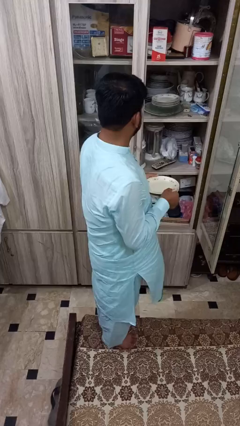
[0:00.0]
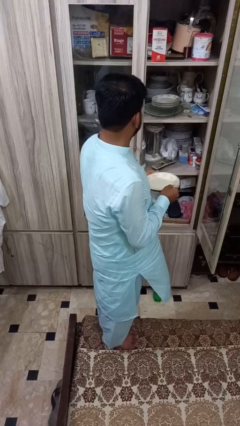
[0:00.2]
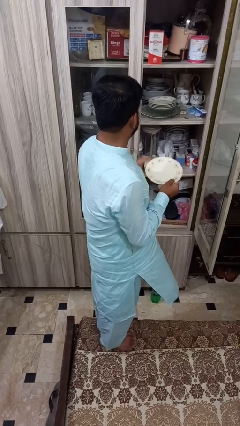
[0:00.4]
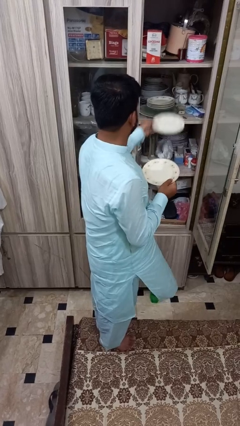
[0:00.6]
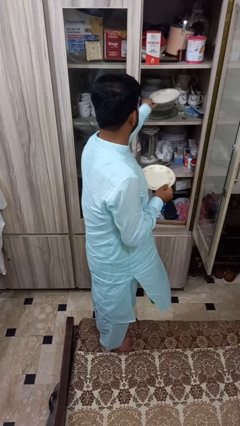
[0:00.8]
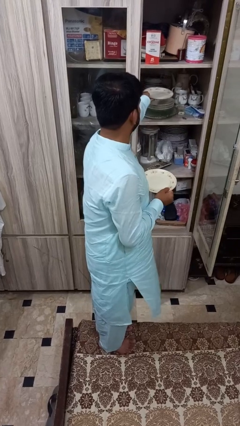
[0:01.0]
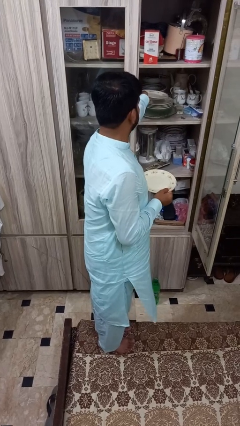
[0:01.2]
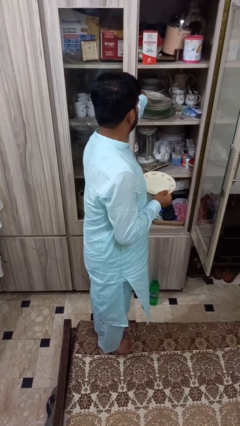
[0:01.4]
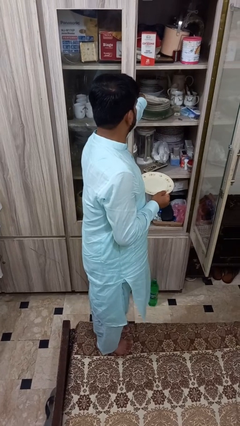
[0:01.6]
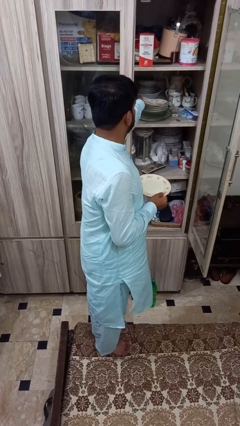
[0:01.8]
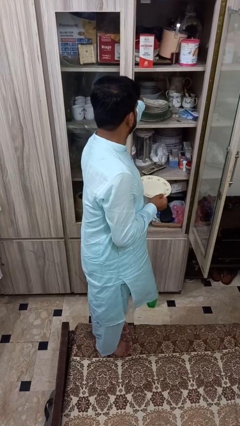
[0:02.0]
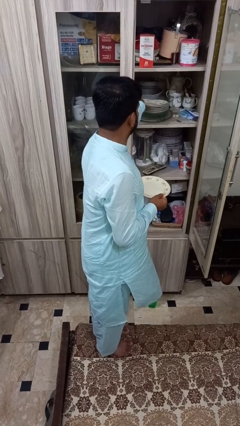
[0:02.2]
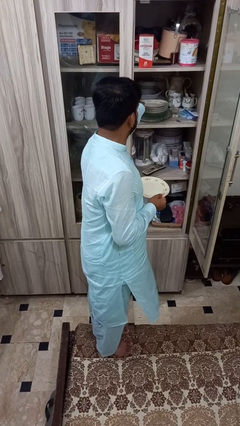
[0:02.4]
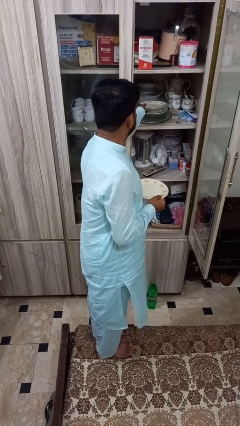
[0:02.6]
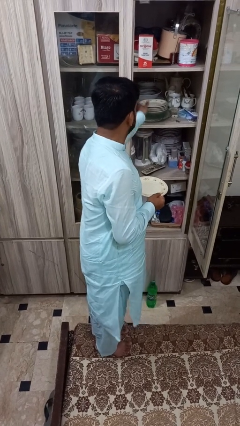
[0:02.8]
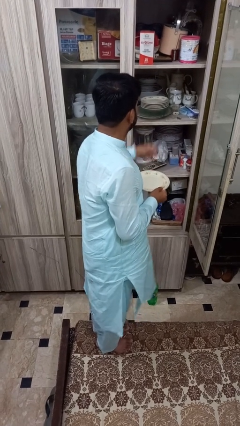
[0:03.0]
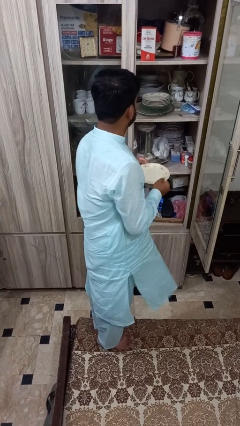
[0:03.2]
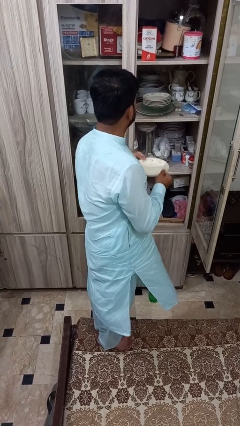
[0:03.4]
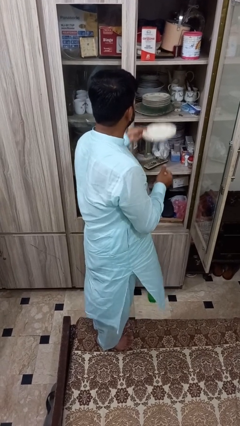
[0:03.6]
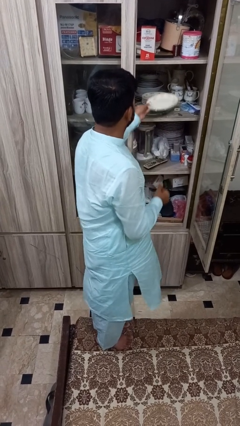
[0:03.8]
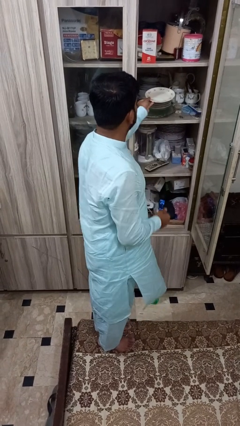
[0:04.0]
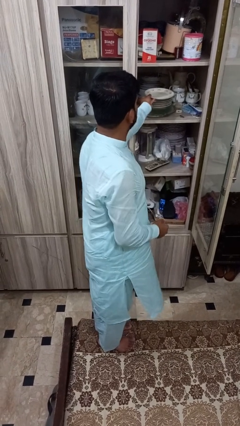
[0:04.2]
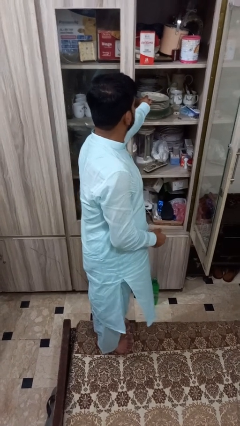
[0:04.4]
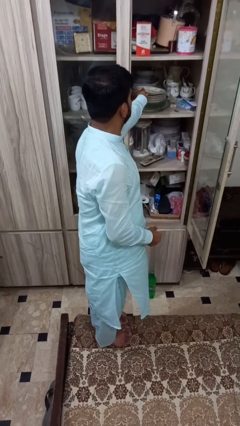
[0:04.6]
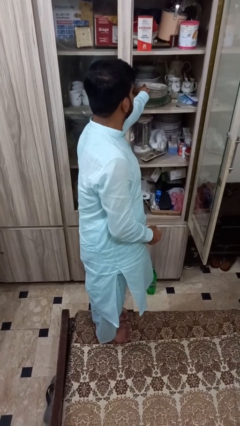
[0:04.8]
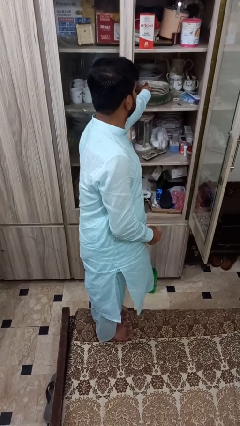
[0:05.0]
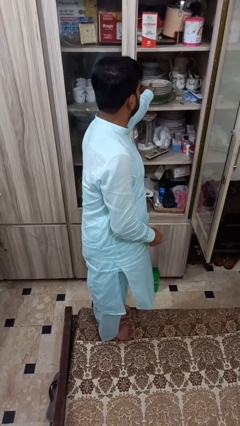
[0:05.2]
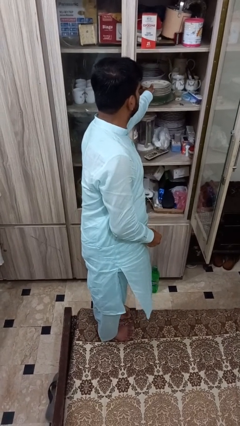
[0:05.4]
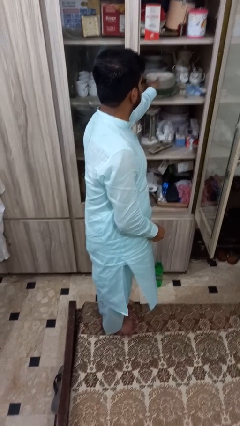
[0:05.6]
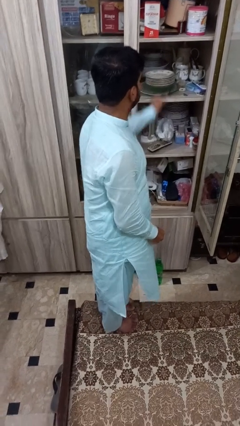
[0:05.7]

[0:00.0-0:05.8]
person loads groceries into cabinet

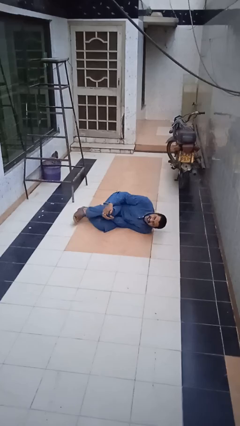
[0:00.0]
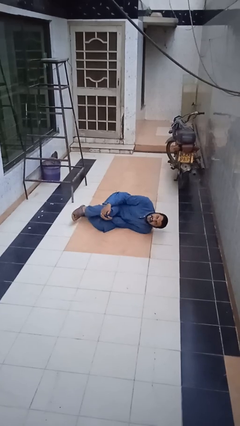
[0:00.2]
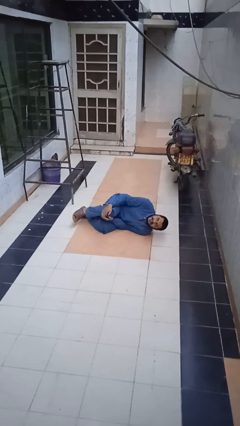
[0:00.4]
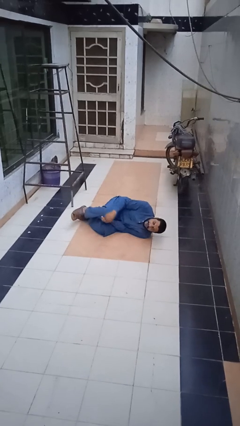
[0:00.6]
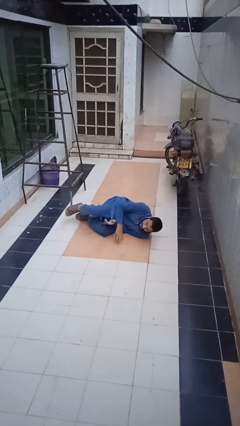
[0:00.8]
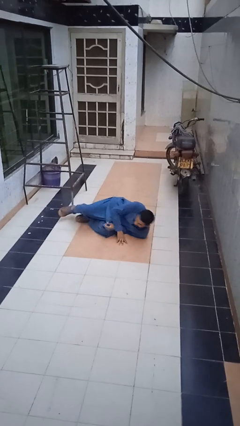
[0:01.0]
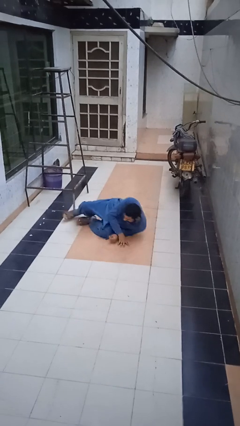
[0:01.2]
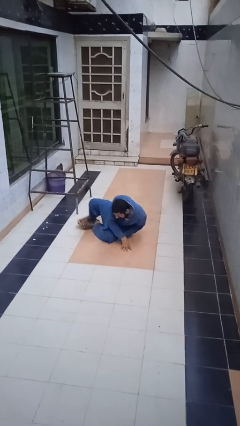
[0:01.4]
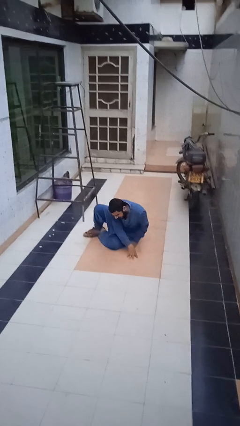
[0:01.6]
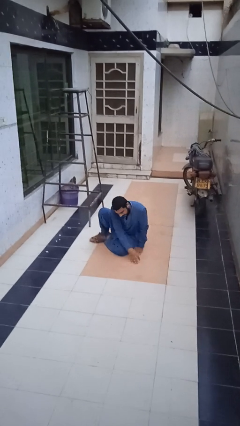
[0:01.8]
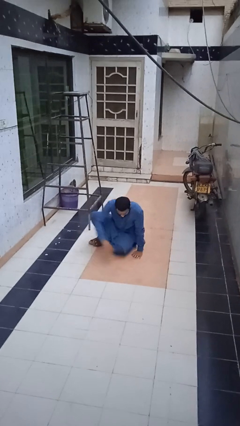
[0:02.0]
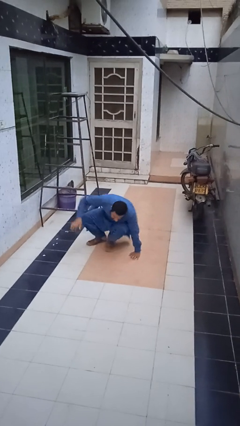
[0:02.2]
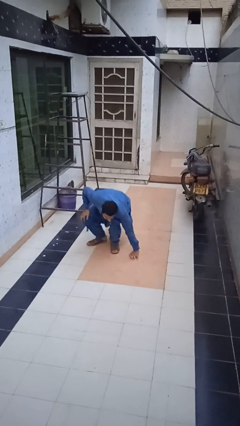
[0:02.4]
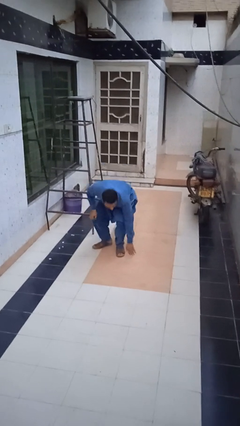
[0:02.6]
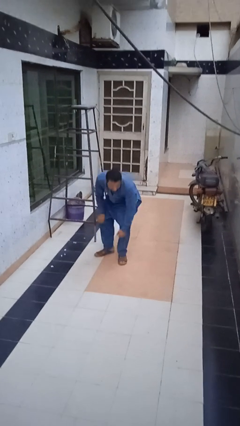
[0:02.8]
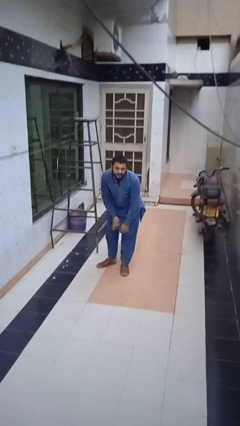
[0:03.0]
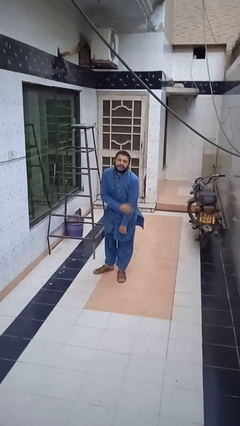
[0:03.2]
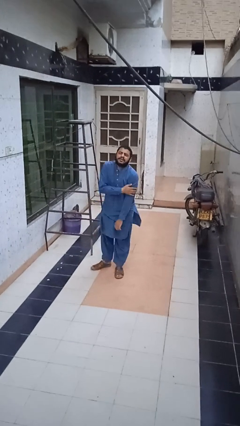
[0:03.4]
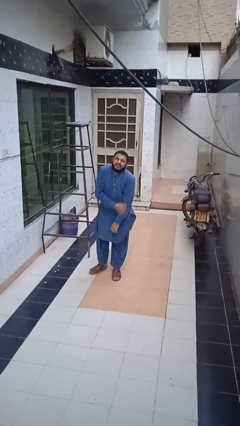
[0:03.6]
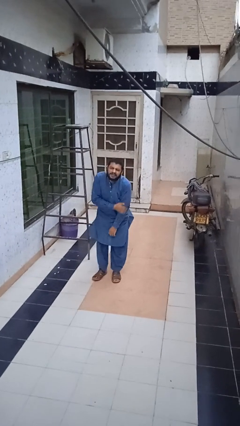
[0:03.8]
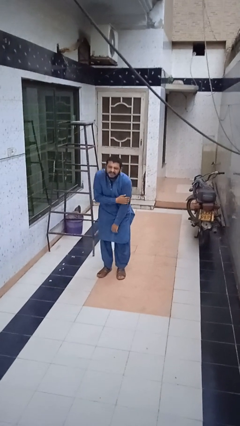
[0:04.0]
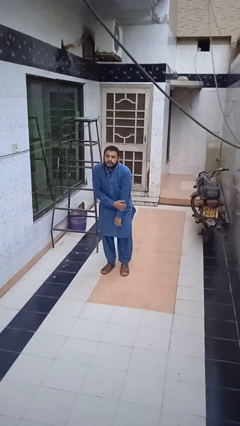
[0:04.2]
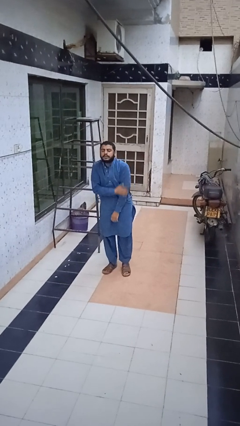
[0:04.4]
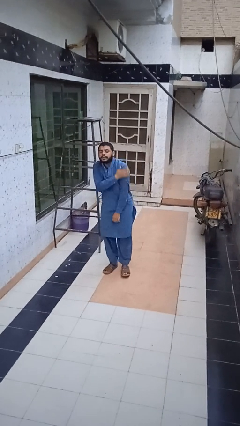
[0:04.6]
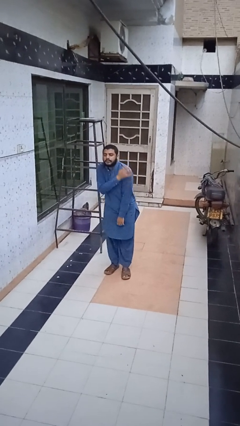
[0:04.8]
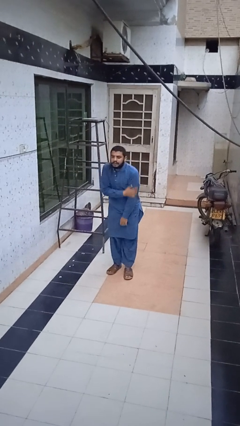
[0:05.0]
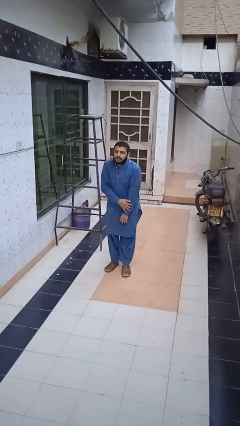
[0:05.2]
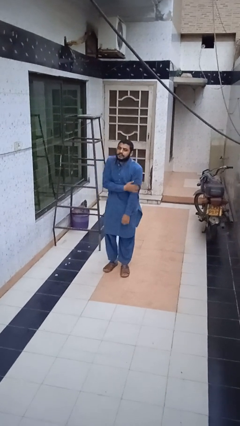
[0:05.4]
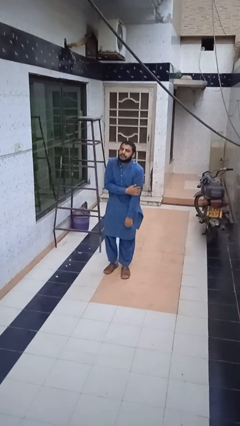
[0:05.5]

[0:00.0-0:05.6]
person stands up from floor

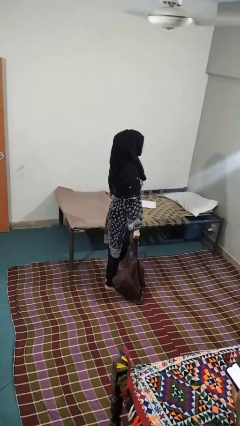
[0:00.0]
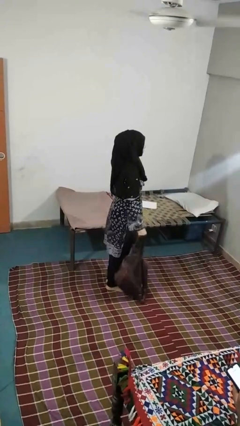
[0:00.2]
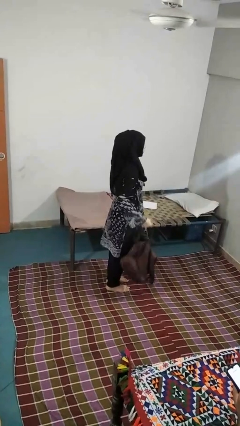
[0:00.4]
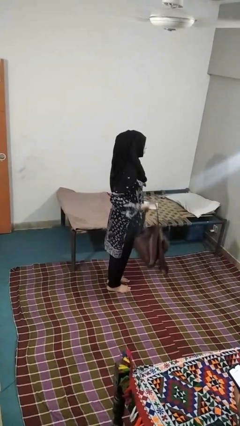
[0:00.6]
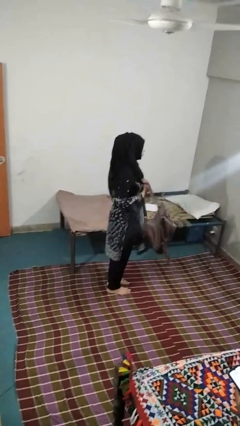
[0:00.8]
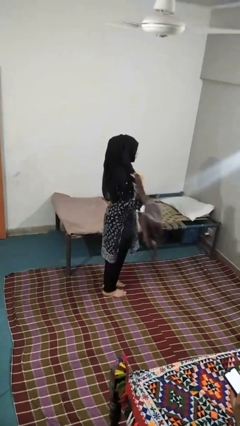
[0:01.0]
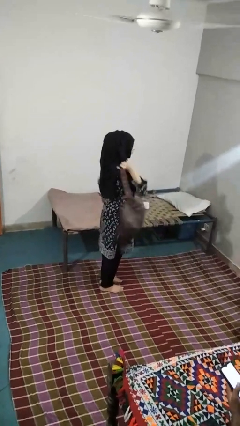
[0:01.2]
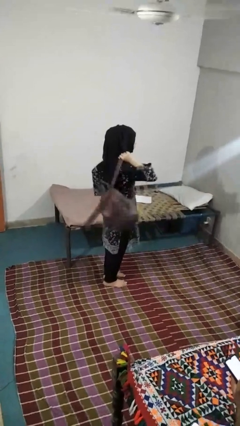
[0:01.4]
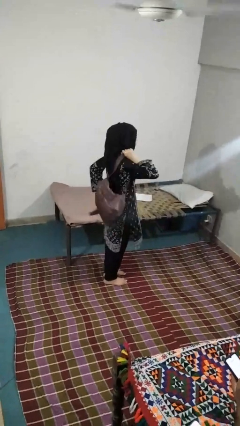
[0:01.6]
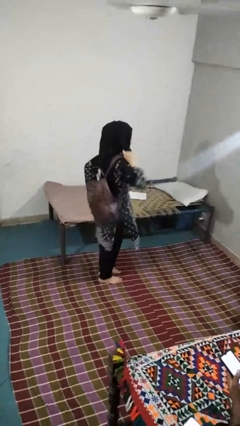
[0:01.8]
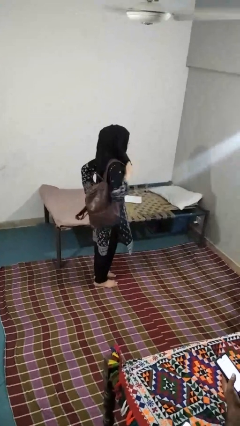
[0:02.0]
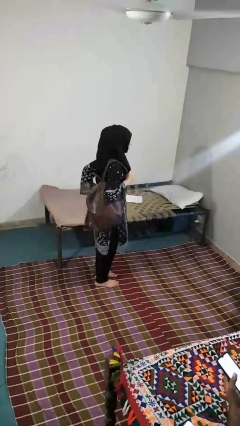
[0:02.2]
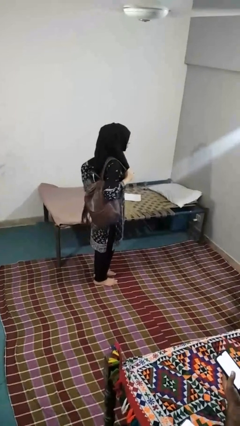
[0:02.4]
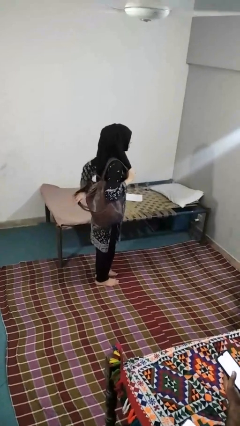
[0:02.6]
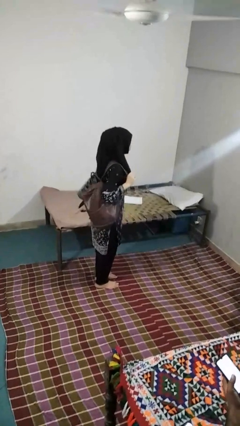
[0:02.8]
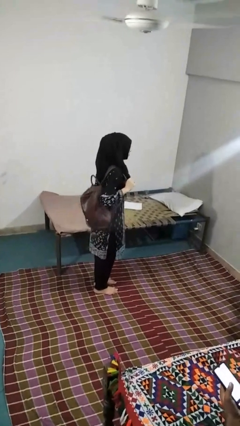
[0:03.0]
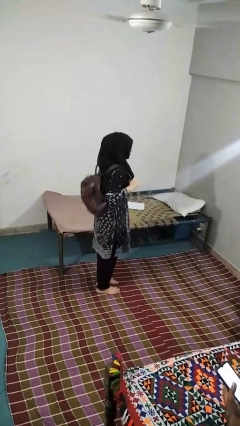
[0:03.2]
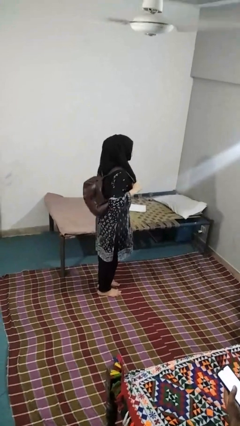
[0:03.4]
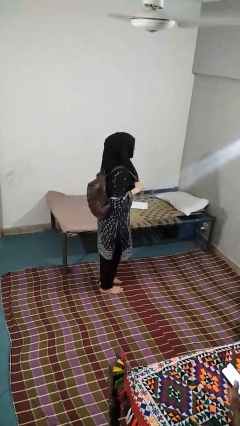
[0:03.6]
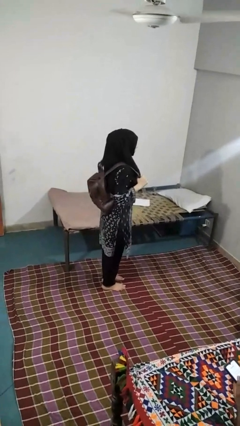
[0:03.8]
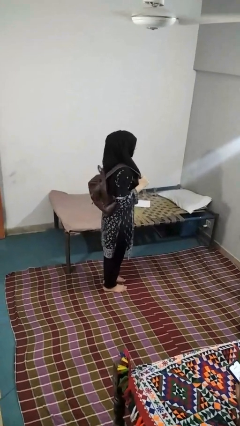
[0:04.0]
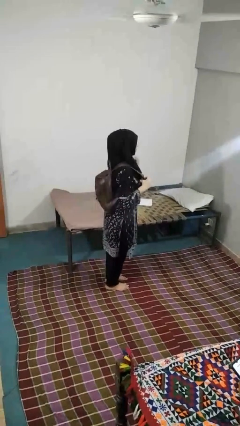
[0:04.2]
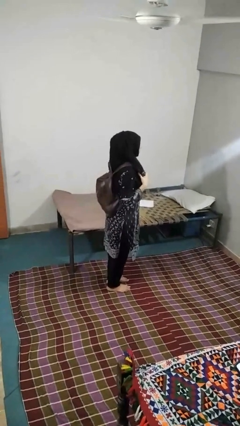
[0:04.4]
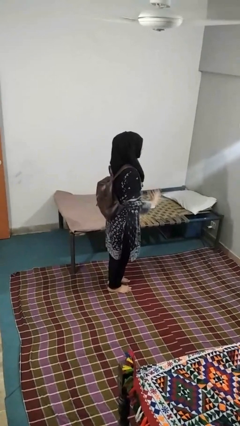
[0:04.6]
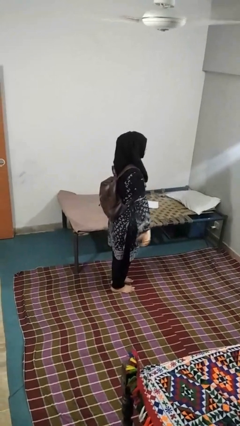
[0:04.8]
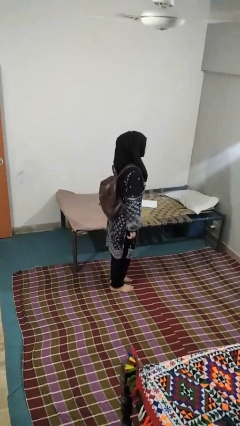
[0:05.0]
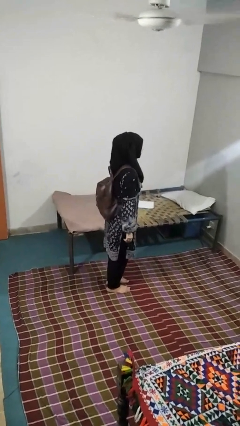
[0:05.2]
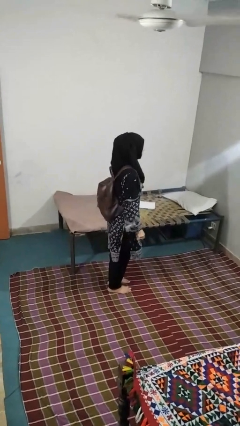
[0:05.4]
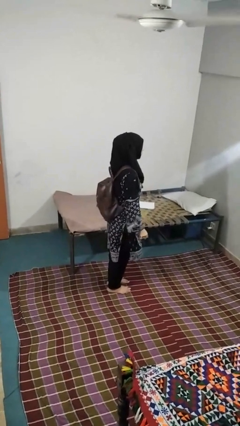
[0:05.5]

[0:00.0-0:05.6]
person puts on backpack

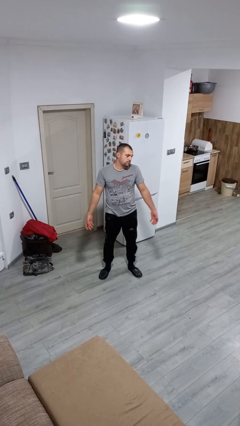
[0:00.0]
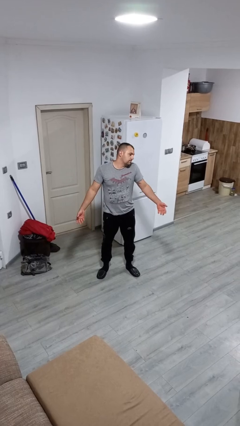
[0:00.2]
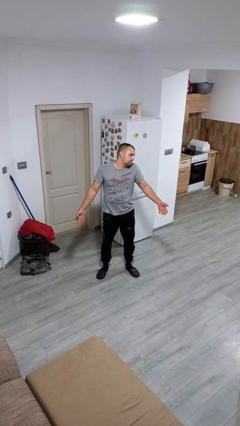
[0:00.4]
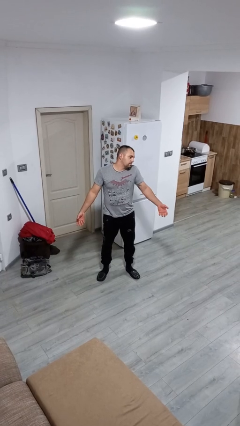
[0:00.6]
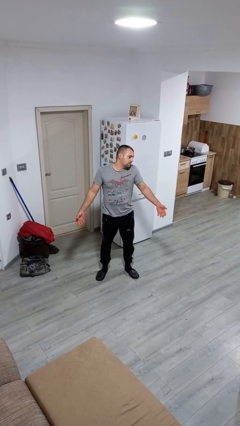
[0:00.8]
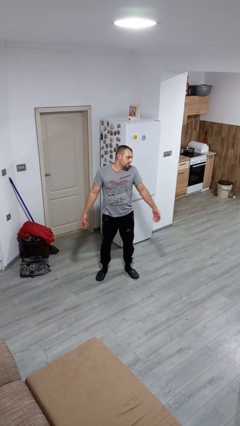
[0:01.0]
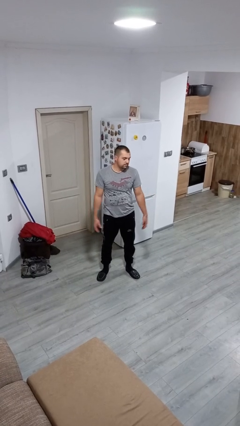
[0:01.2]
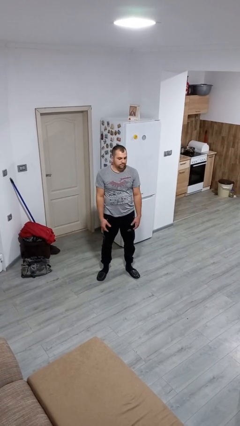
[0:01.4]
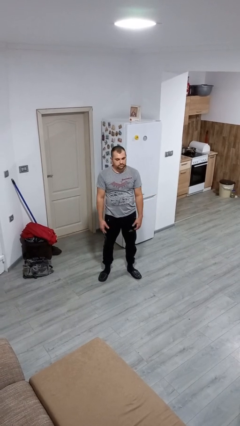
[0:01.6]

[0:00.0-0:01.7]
person shrugs
